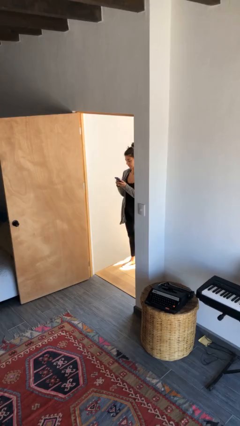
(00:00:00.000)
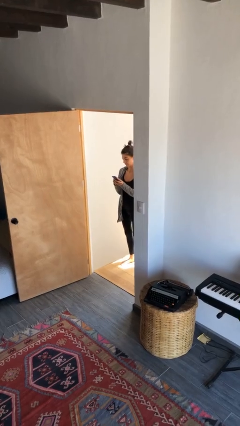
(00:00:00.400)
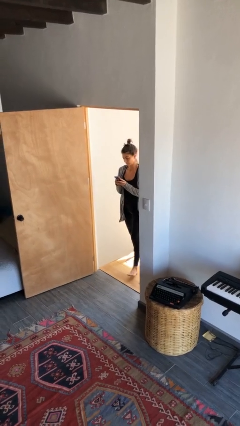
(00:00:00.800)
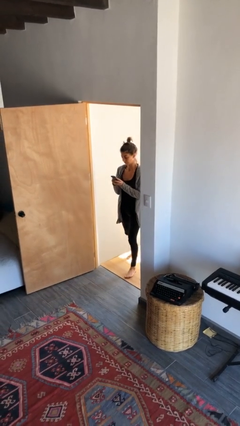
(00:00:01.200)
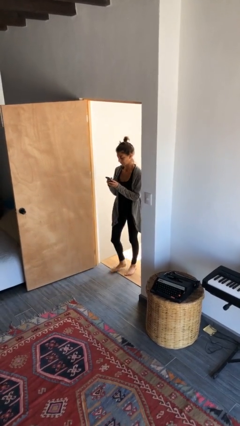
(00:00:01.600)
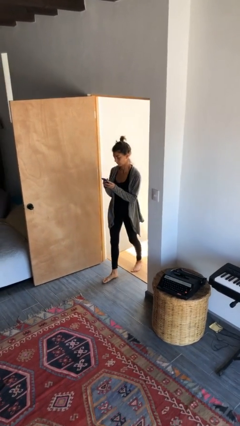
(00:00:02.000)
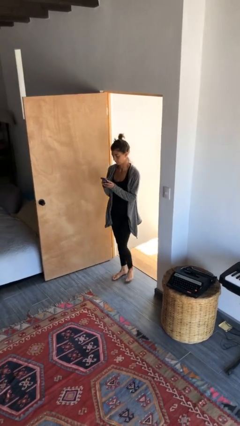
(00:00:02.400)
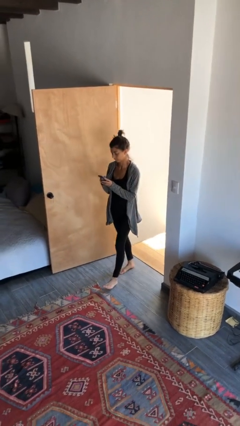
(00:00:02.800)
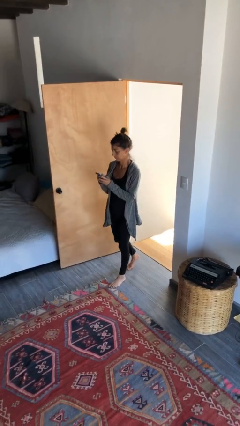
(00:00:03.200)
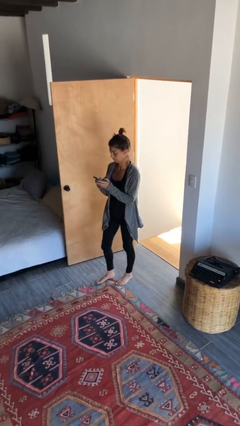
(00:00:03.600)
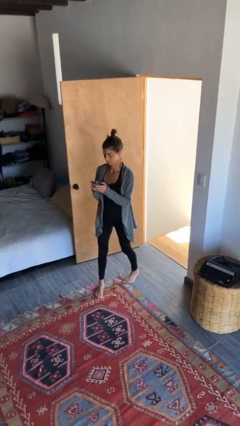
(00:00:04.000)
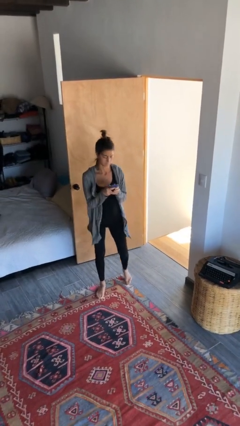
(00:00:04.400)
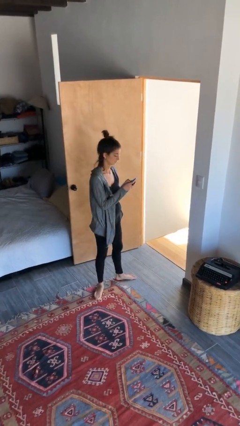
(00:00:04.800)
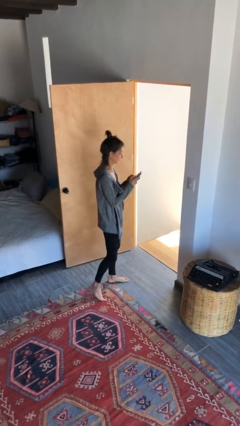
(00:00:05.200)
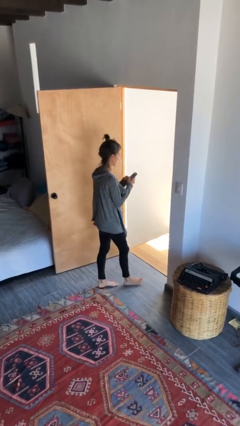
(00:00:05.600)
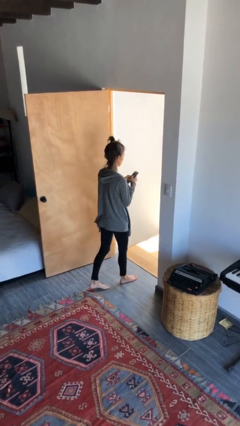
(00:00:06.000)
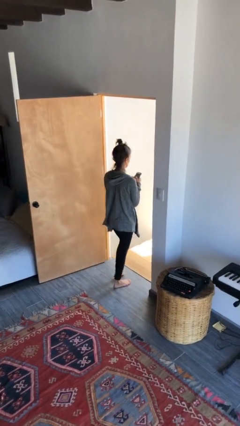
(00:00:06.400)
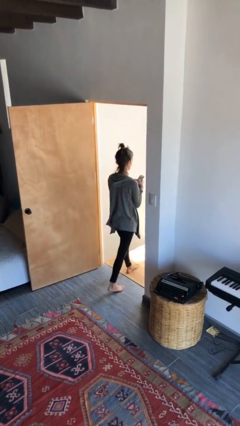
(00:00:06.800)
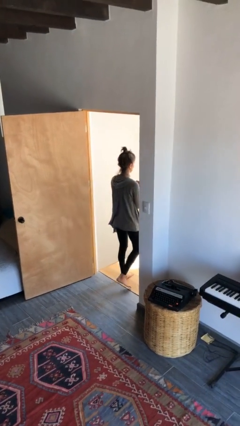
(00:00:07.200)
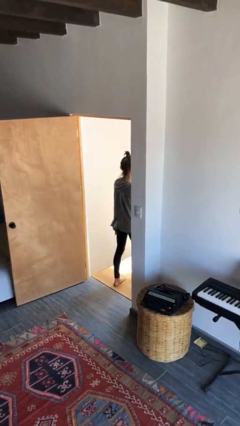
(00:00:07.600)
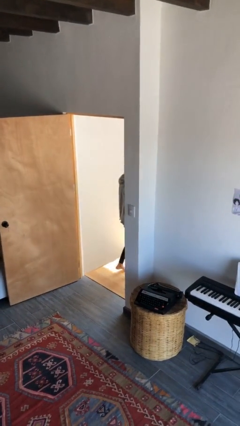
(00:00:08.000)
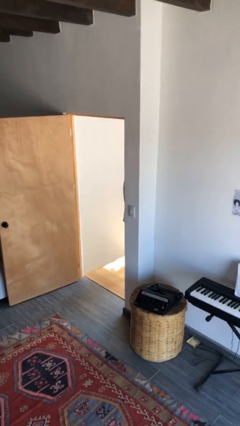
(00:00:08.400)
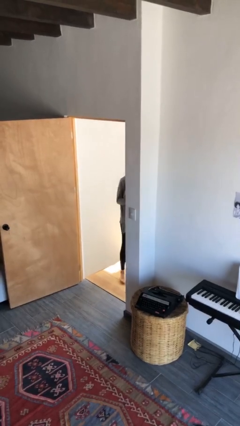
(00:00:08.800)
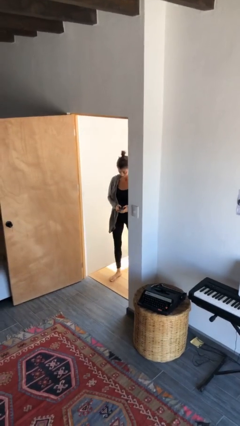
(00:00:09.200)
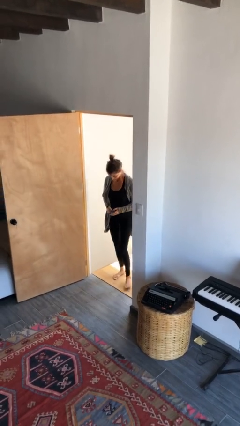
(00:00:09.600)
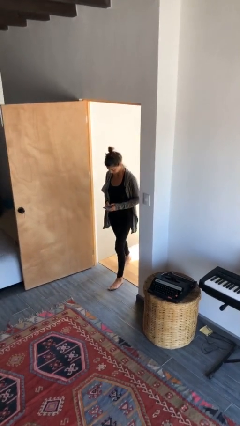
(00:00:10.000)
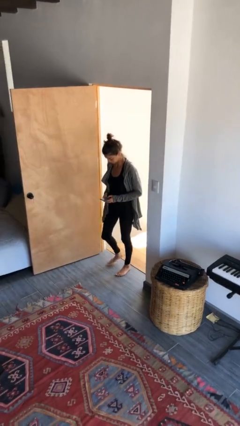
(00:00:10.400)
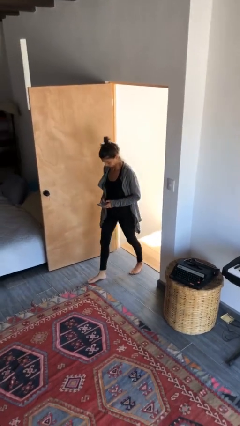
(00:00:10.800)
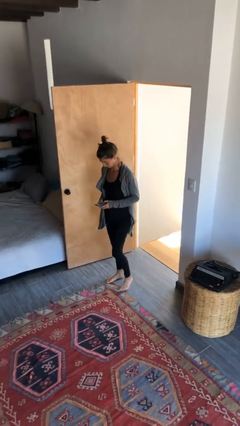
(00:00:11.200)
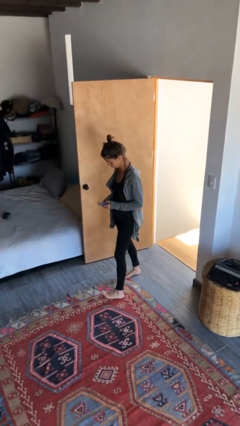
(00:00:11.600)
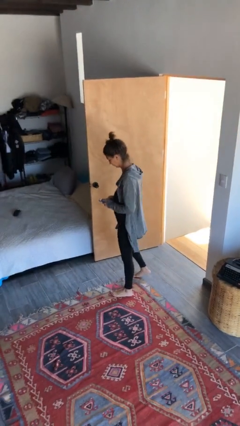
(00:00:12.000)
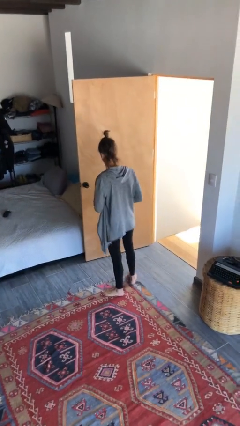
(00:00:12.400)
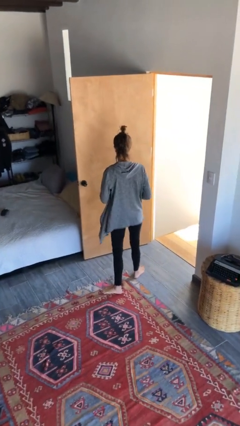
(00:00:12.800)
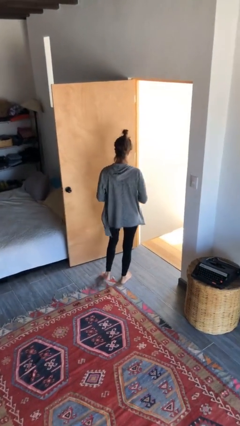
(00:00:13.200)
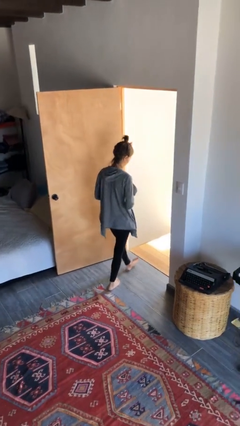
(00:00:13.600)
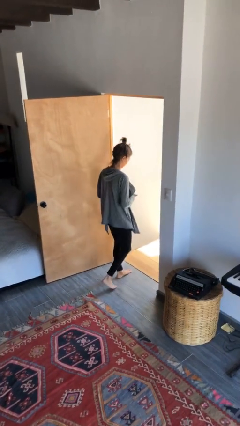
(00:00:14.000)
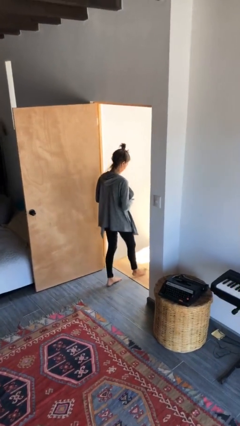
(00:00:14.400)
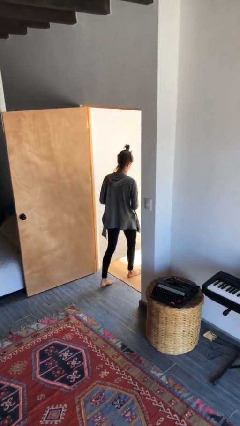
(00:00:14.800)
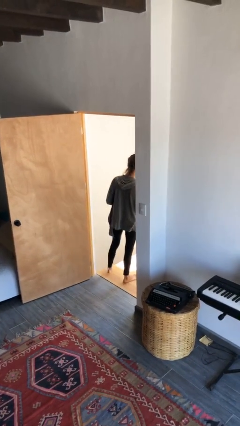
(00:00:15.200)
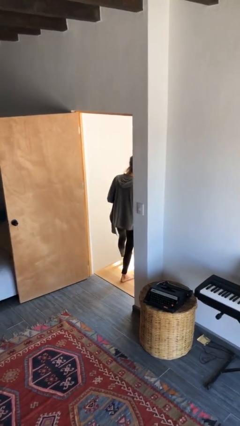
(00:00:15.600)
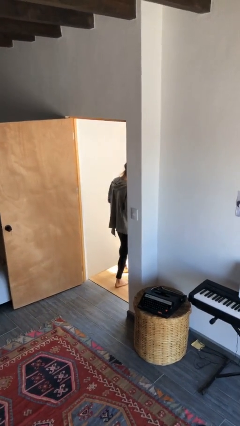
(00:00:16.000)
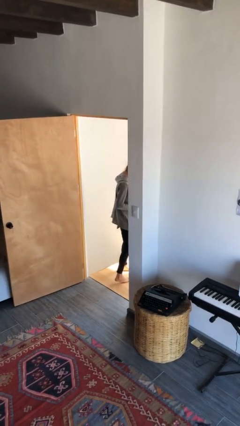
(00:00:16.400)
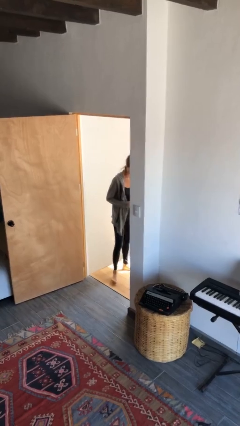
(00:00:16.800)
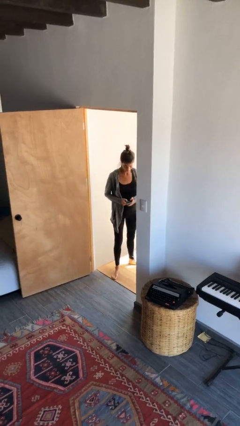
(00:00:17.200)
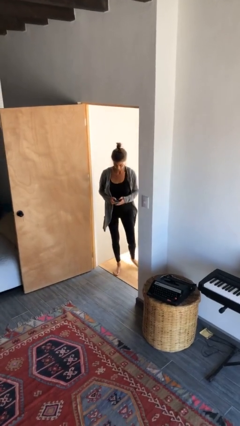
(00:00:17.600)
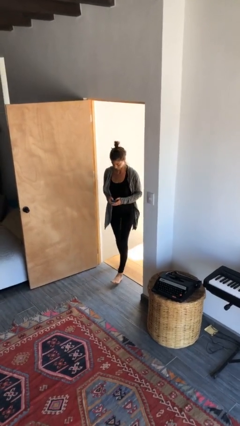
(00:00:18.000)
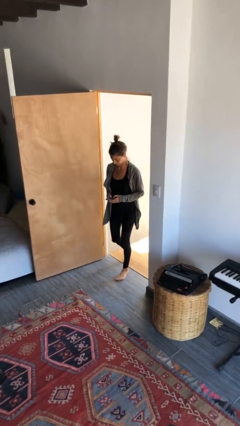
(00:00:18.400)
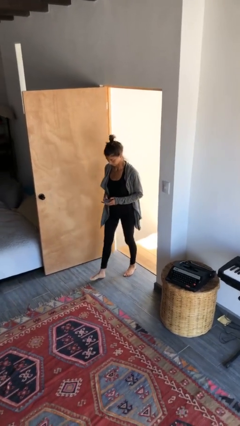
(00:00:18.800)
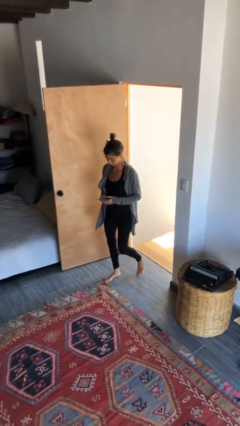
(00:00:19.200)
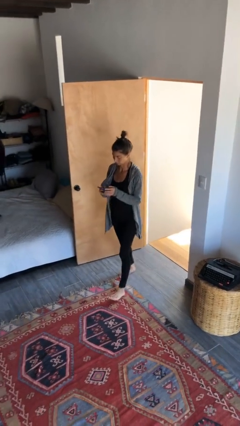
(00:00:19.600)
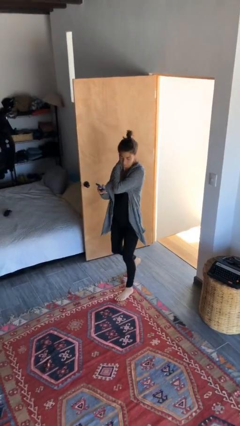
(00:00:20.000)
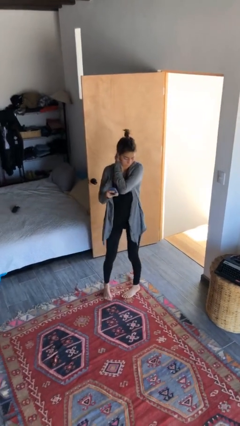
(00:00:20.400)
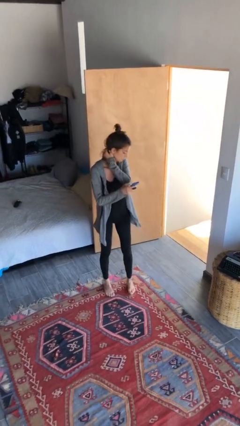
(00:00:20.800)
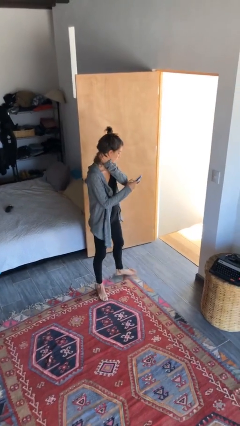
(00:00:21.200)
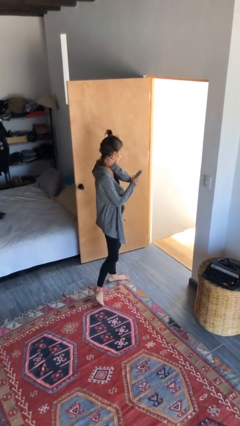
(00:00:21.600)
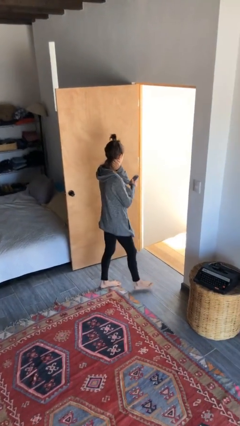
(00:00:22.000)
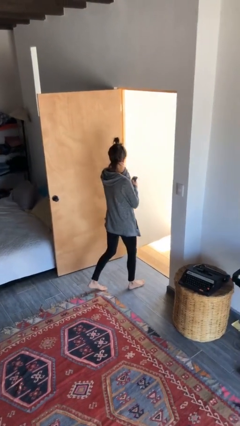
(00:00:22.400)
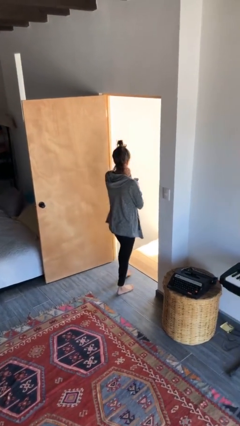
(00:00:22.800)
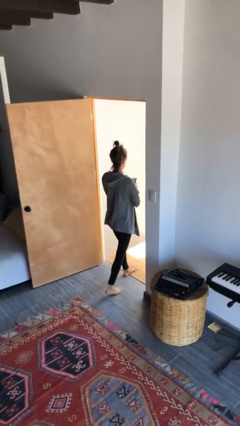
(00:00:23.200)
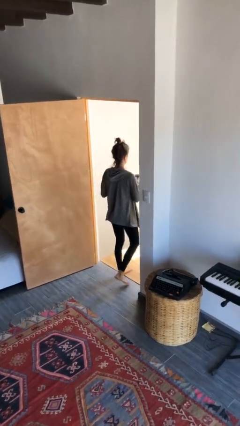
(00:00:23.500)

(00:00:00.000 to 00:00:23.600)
person texts on phone

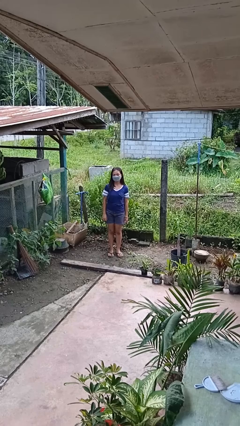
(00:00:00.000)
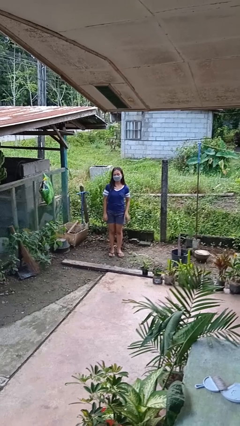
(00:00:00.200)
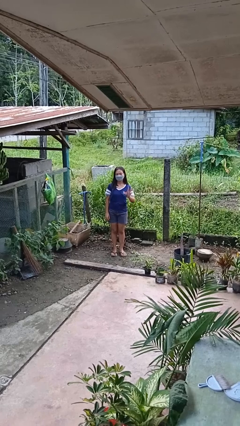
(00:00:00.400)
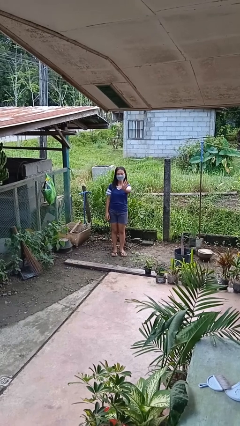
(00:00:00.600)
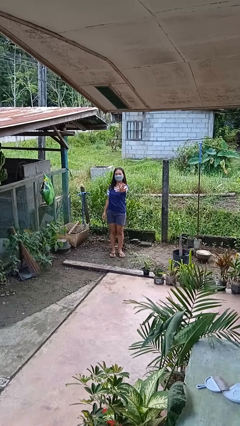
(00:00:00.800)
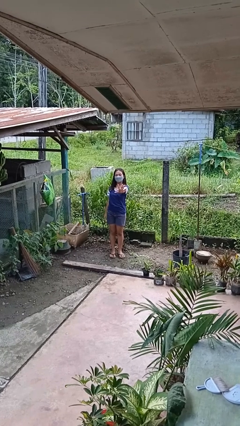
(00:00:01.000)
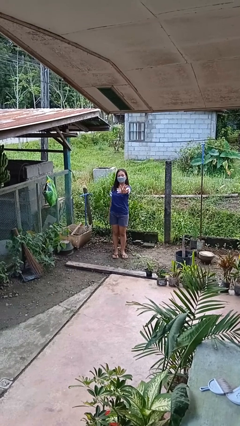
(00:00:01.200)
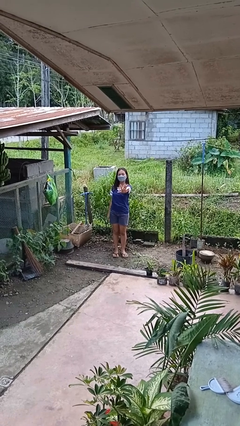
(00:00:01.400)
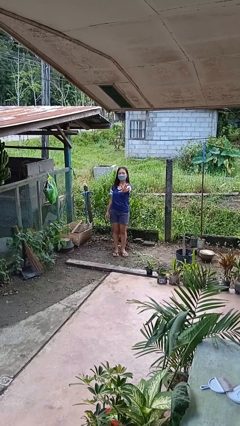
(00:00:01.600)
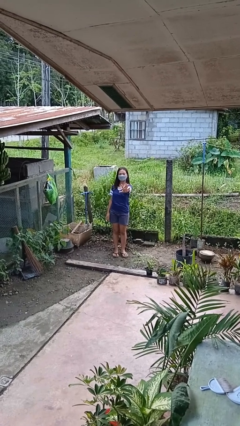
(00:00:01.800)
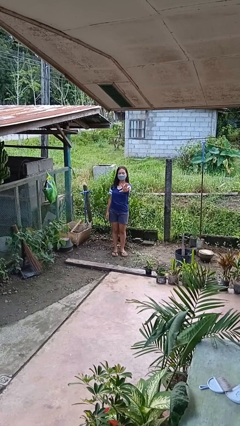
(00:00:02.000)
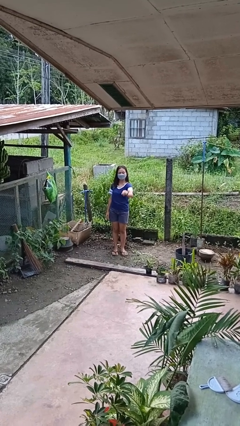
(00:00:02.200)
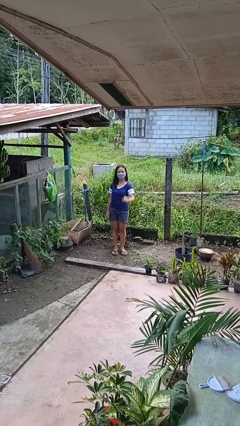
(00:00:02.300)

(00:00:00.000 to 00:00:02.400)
person gestures number five

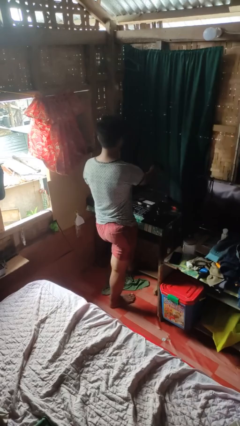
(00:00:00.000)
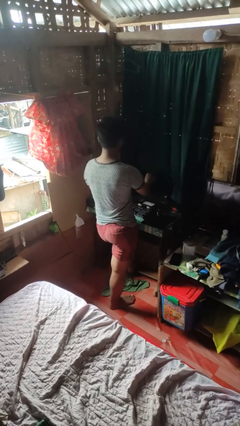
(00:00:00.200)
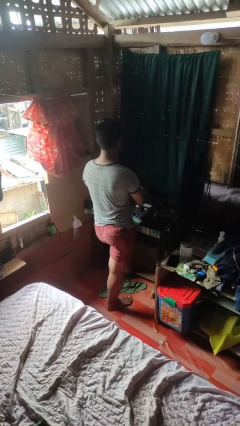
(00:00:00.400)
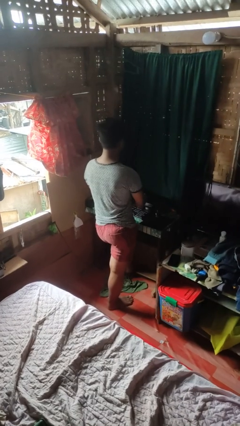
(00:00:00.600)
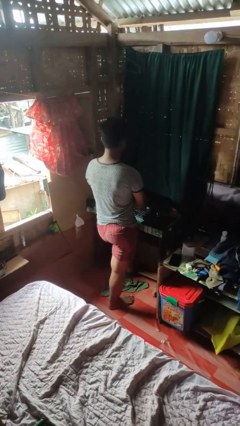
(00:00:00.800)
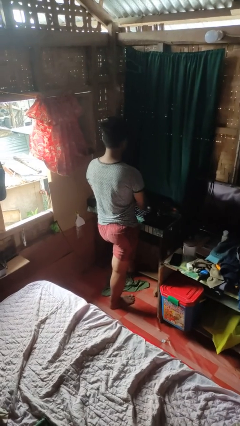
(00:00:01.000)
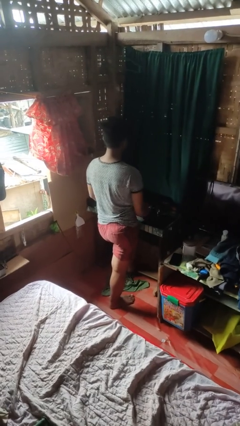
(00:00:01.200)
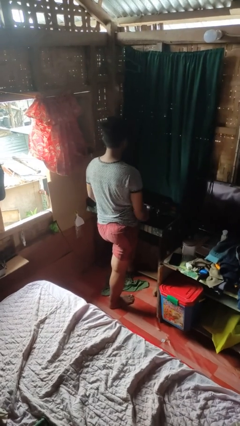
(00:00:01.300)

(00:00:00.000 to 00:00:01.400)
person closes laptop

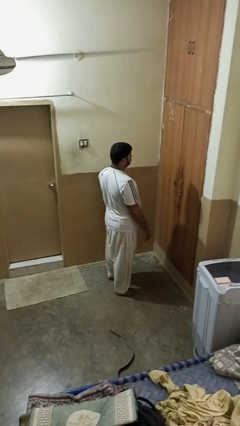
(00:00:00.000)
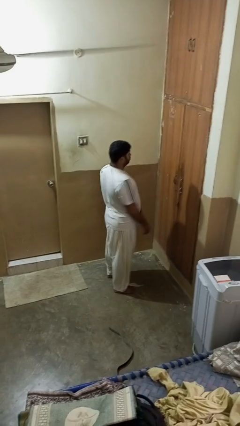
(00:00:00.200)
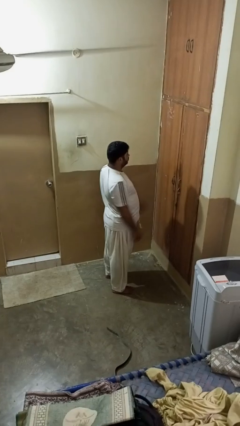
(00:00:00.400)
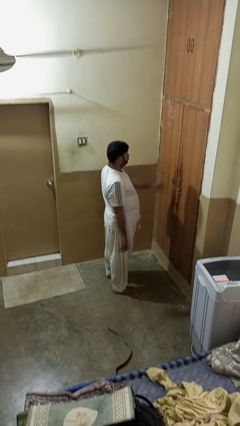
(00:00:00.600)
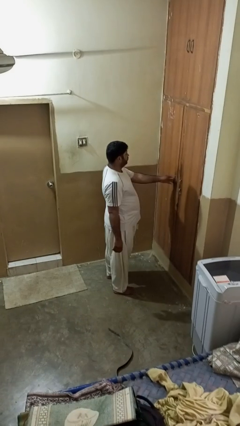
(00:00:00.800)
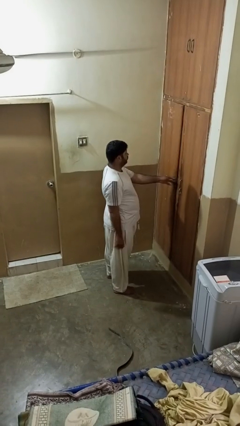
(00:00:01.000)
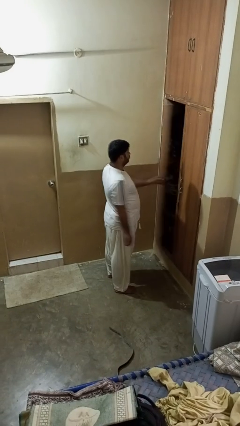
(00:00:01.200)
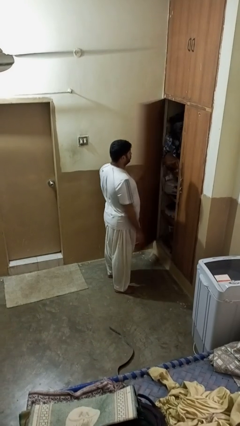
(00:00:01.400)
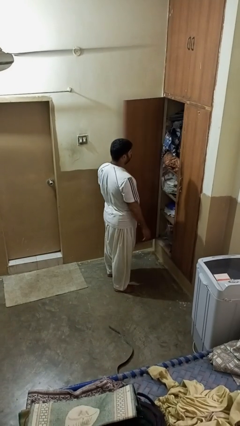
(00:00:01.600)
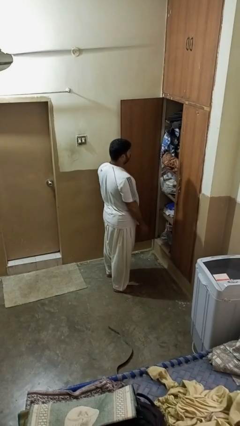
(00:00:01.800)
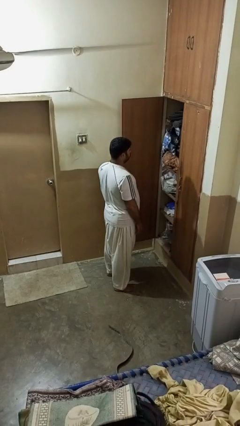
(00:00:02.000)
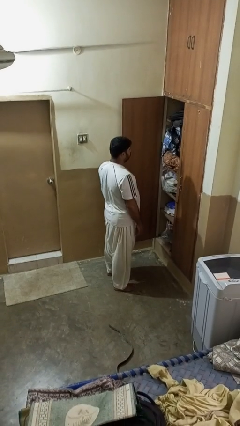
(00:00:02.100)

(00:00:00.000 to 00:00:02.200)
person opens closet door
